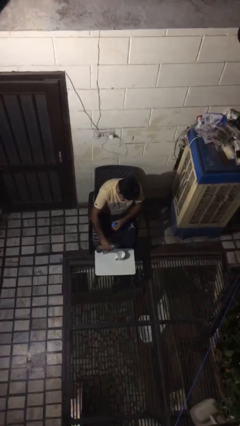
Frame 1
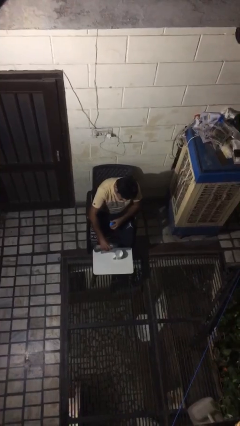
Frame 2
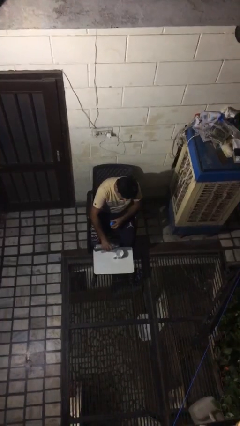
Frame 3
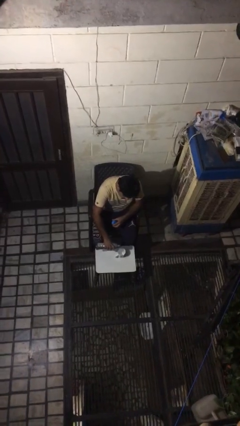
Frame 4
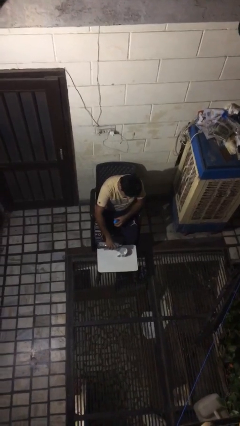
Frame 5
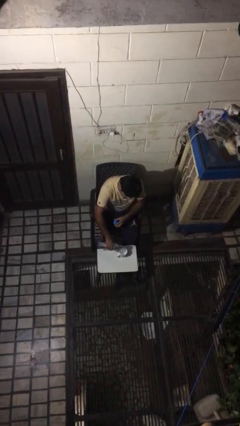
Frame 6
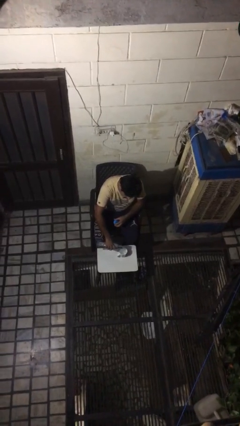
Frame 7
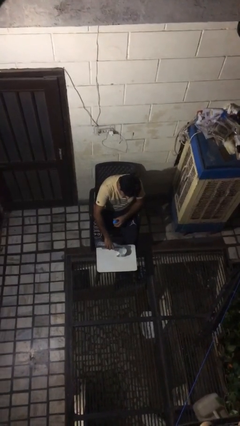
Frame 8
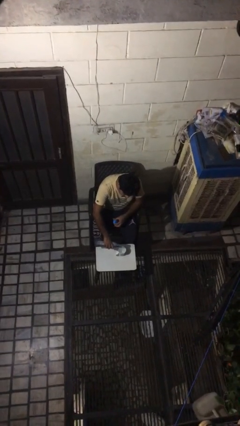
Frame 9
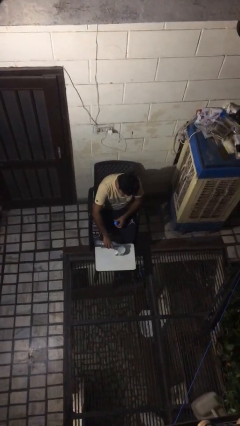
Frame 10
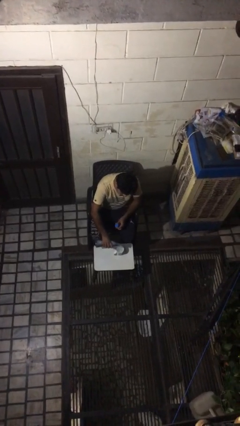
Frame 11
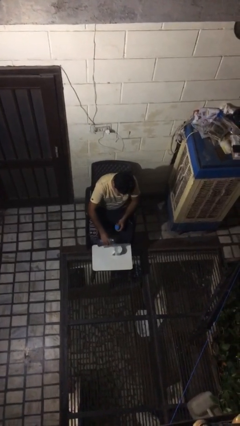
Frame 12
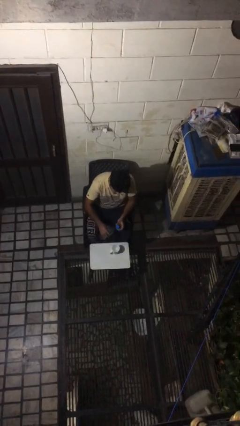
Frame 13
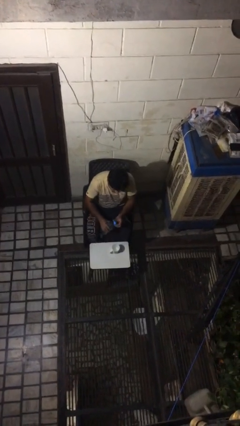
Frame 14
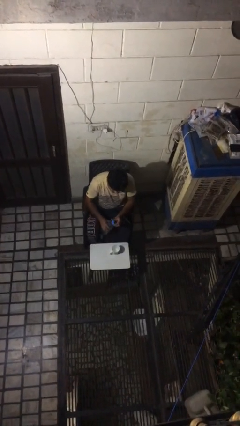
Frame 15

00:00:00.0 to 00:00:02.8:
person pours liquid into cup

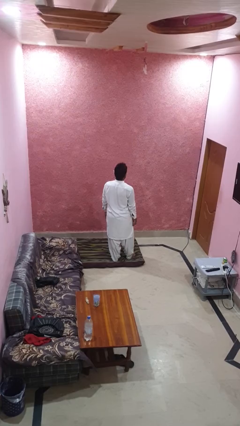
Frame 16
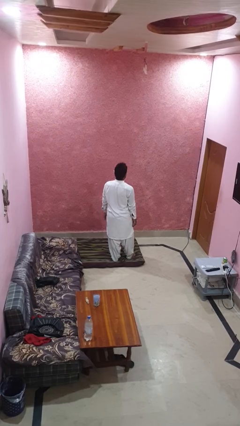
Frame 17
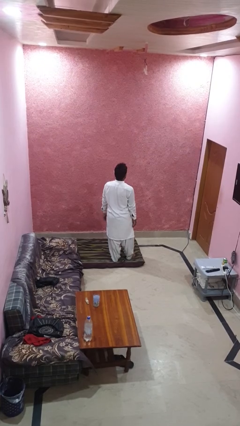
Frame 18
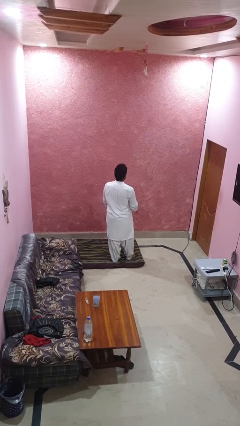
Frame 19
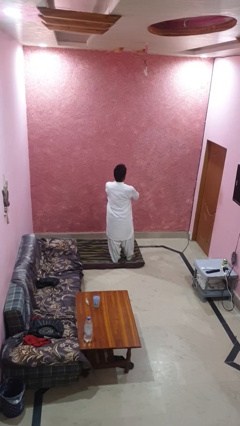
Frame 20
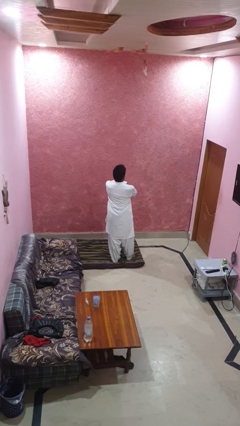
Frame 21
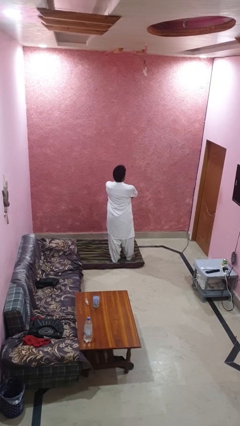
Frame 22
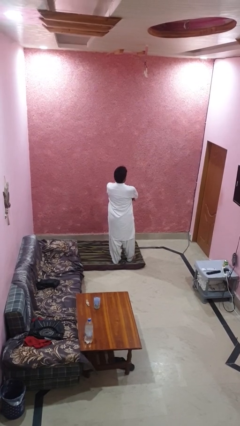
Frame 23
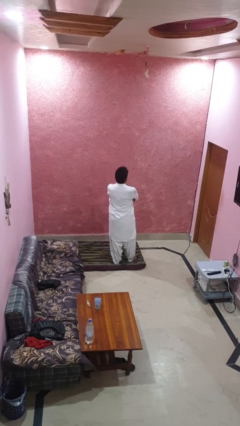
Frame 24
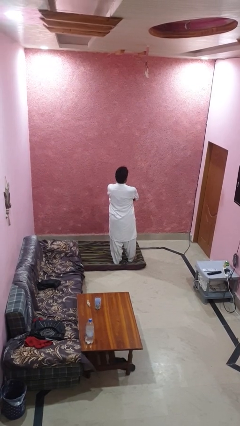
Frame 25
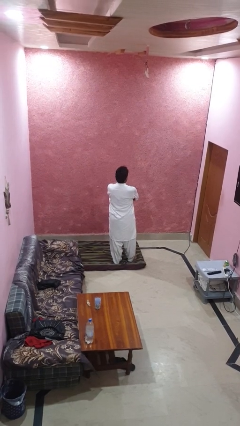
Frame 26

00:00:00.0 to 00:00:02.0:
person crosses arms

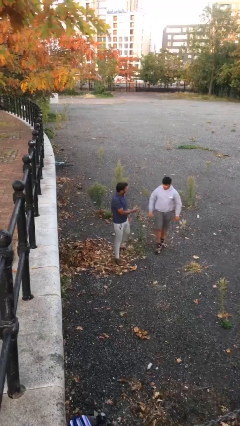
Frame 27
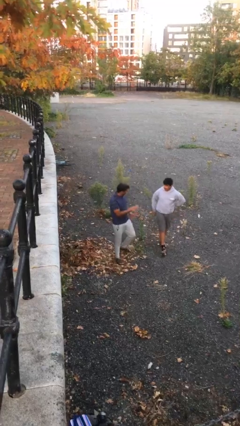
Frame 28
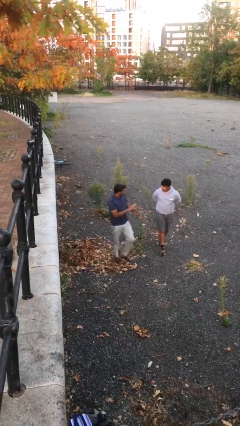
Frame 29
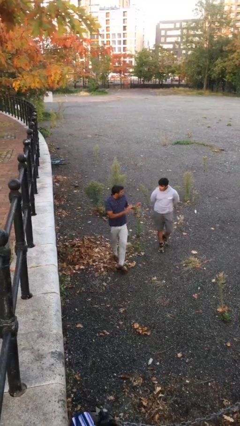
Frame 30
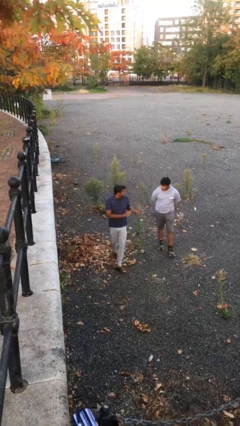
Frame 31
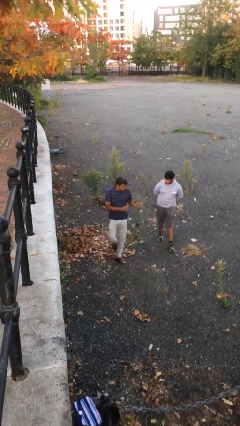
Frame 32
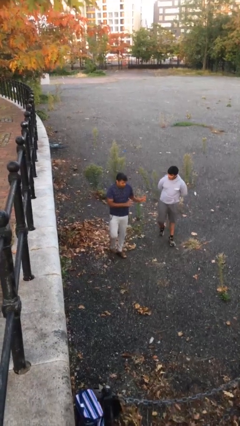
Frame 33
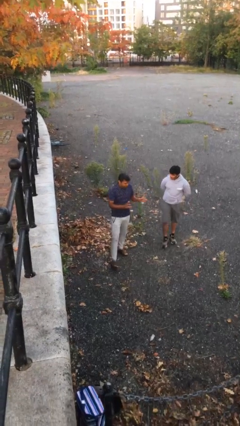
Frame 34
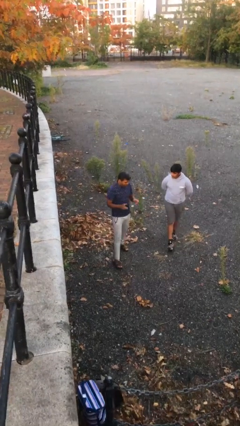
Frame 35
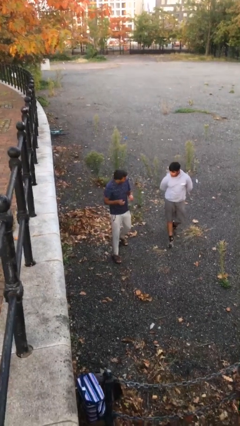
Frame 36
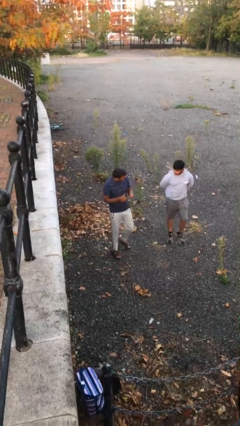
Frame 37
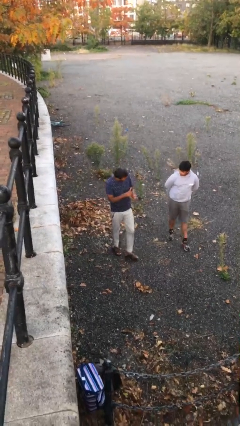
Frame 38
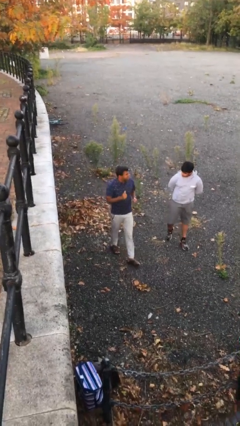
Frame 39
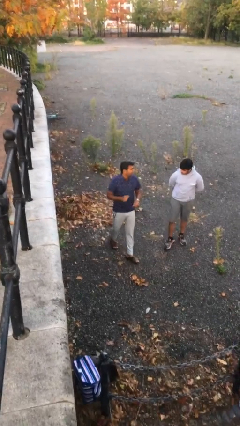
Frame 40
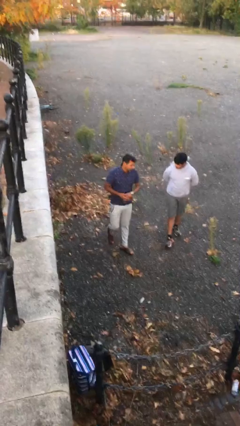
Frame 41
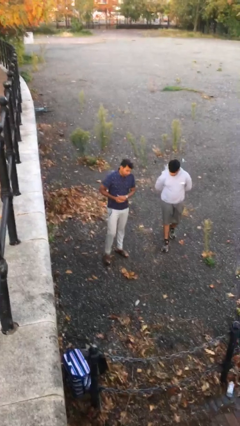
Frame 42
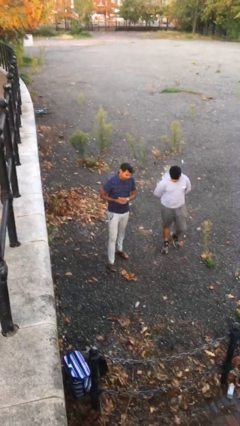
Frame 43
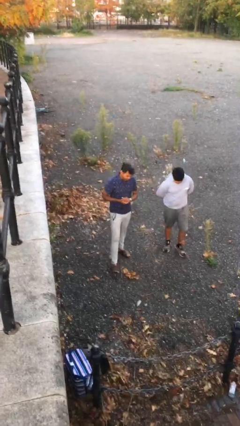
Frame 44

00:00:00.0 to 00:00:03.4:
person talks to person

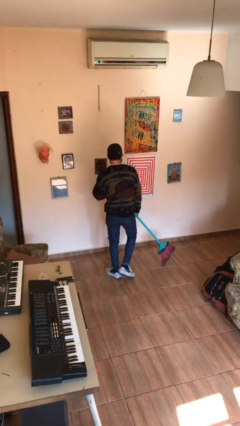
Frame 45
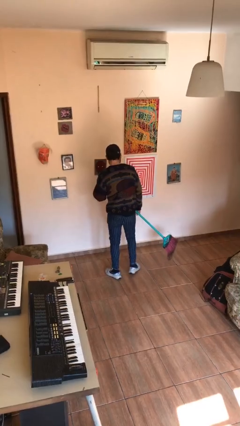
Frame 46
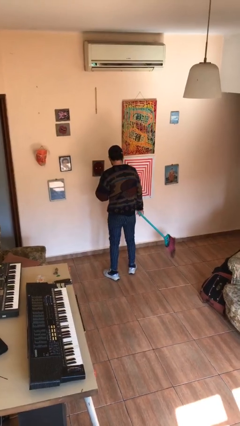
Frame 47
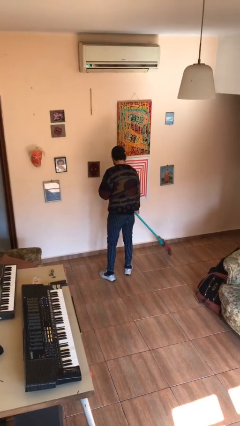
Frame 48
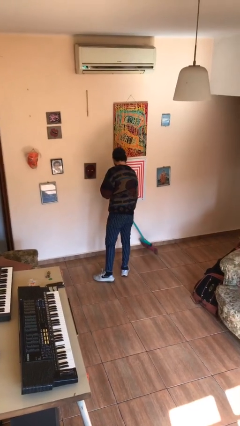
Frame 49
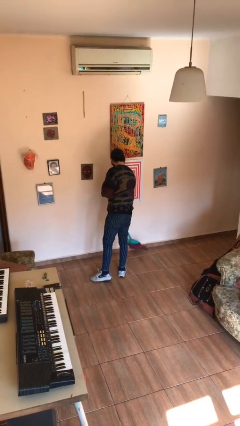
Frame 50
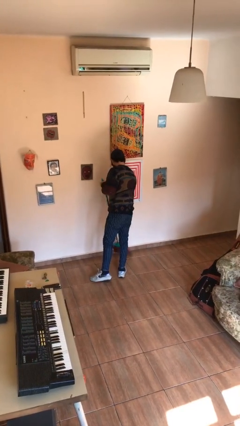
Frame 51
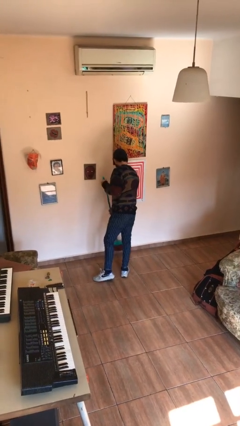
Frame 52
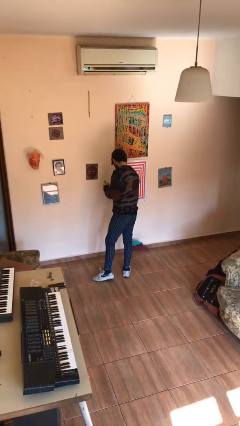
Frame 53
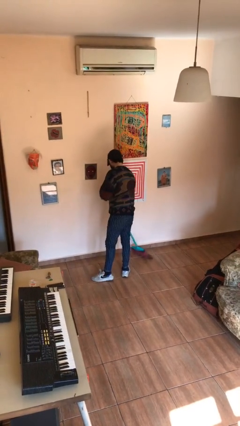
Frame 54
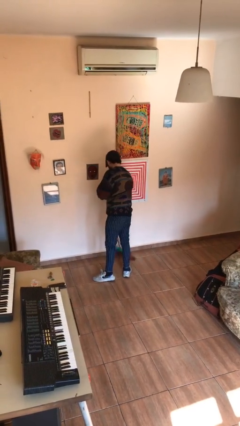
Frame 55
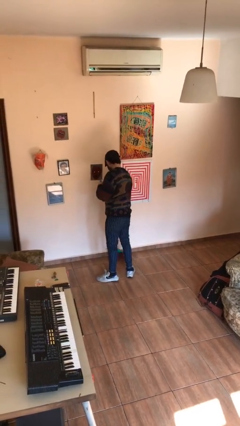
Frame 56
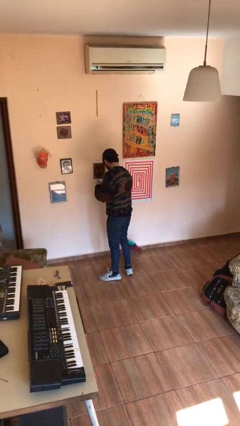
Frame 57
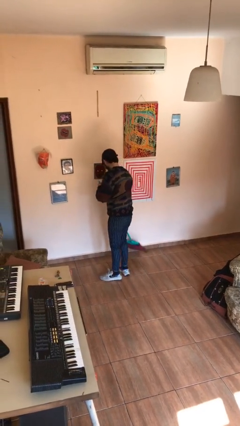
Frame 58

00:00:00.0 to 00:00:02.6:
person sweeps floor

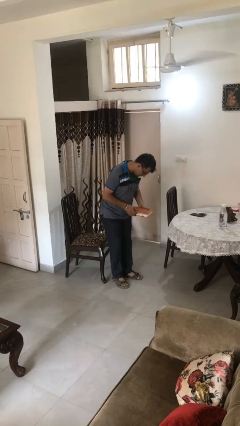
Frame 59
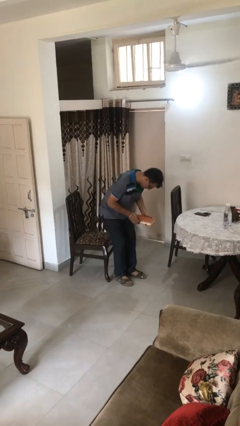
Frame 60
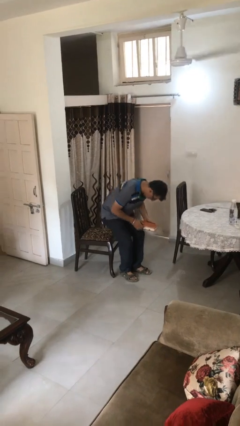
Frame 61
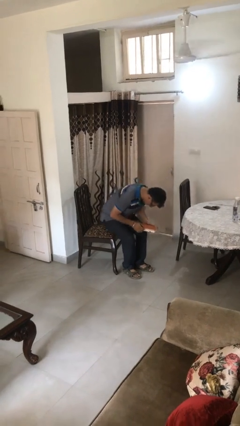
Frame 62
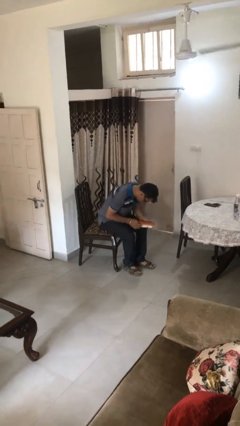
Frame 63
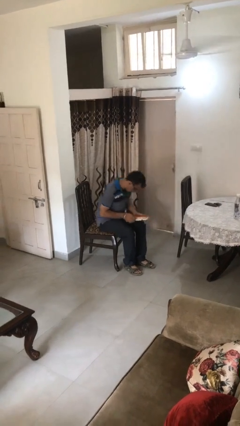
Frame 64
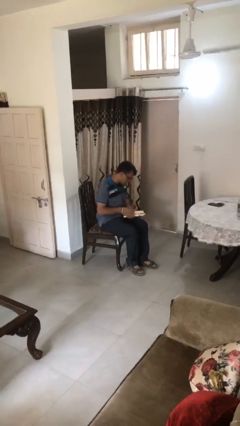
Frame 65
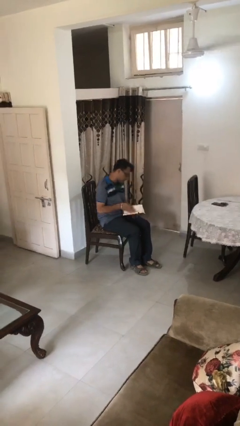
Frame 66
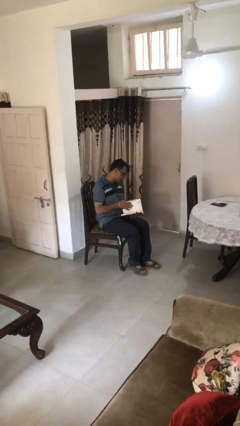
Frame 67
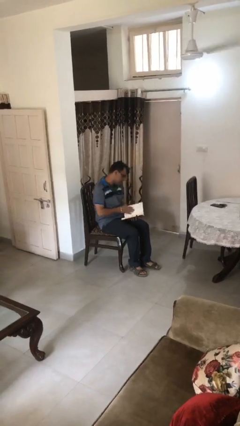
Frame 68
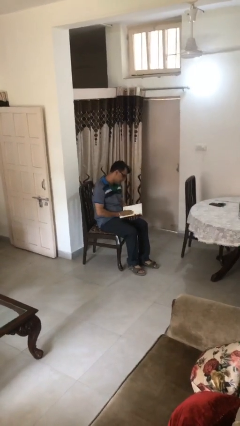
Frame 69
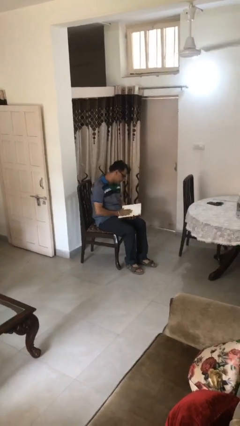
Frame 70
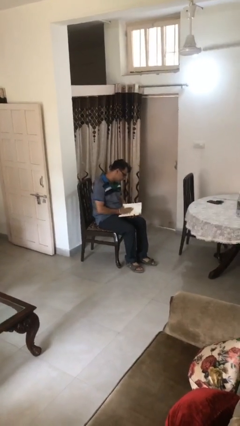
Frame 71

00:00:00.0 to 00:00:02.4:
person sits down

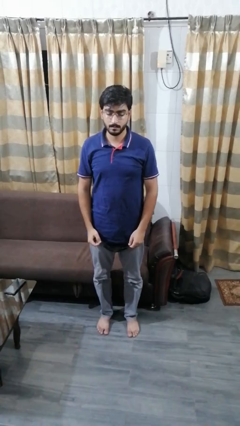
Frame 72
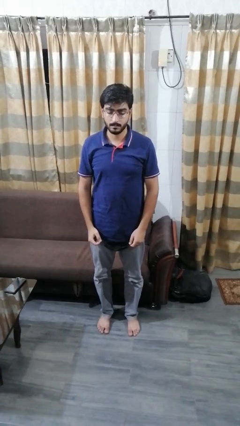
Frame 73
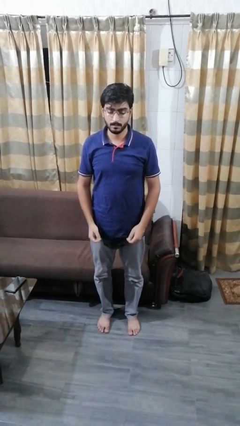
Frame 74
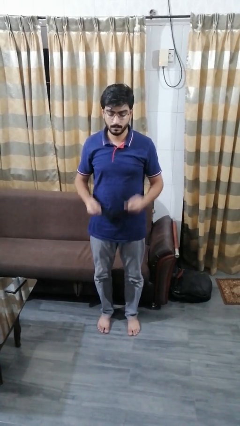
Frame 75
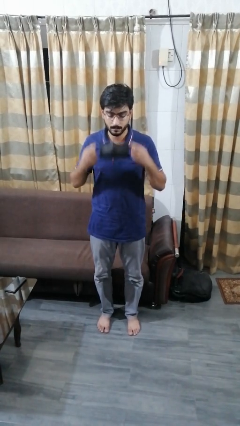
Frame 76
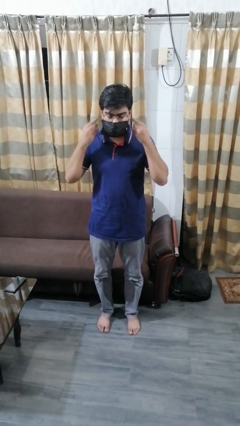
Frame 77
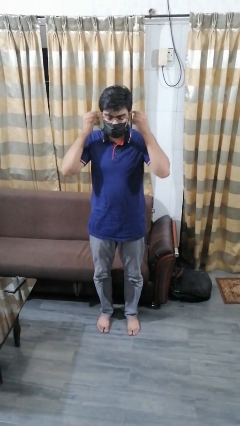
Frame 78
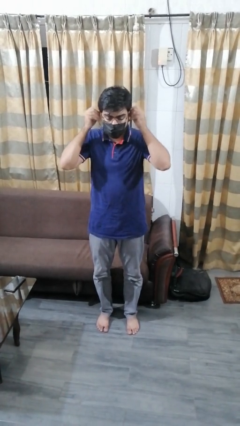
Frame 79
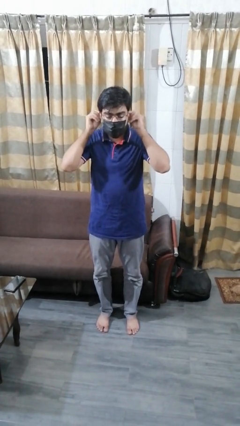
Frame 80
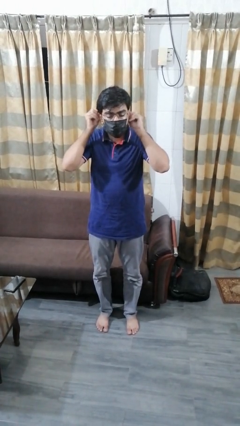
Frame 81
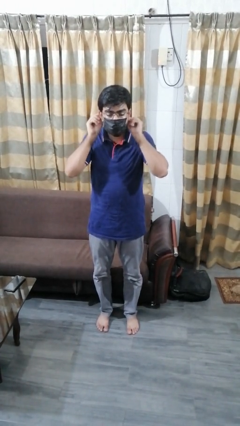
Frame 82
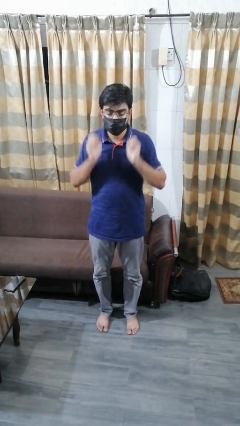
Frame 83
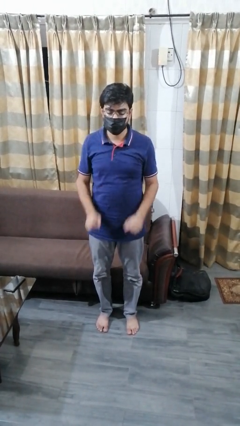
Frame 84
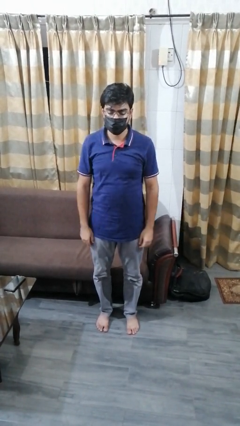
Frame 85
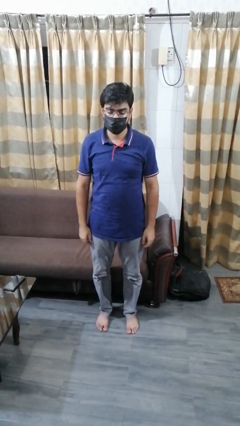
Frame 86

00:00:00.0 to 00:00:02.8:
person puts on facemask

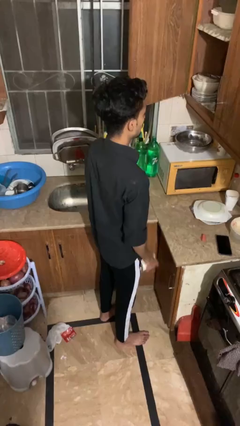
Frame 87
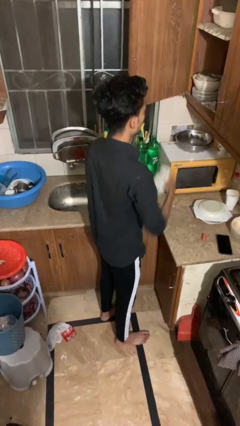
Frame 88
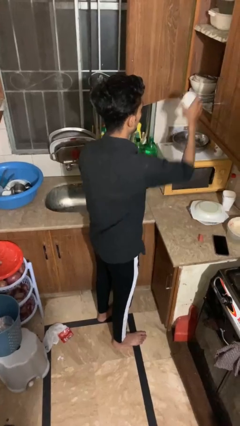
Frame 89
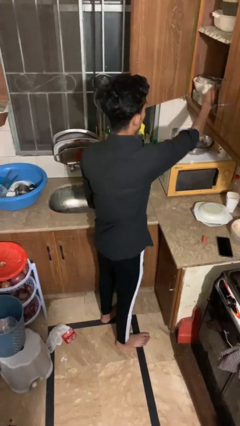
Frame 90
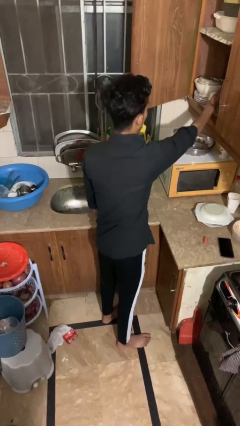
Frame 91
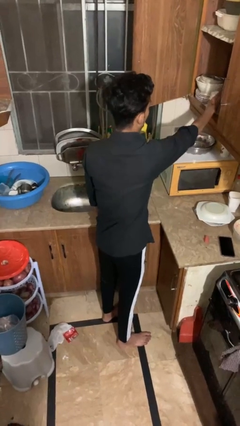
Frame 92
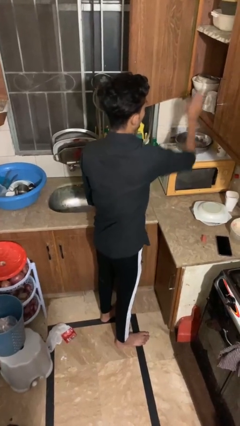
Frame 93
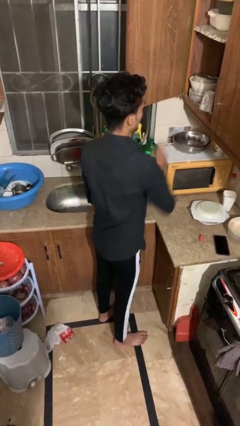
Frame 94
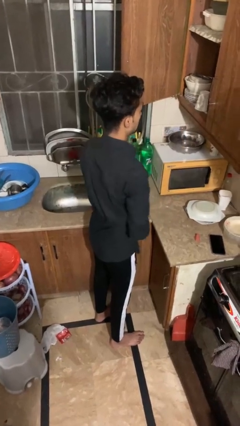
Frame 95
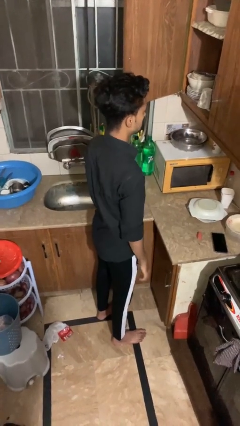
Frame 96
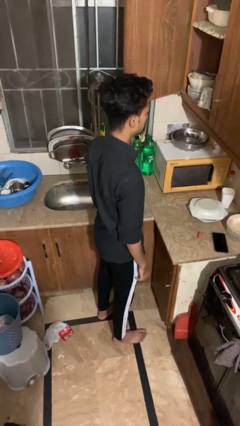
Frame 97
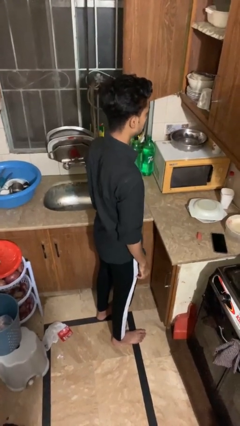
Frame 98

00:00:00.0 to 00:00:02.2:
person puts down object into cabinet
